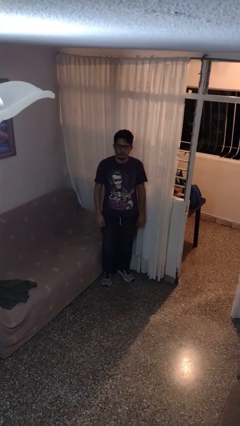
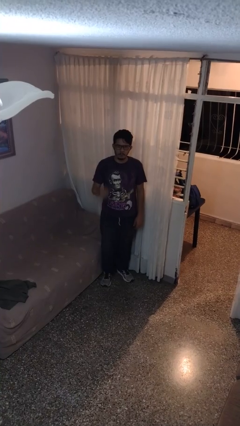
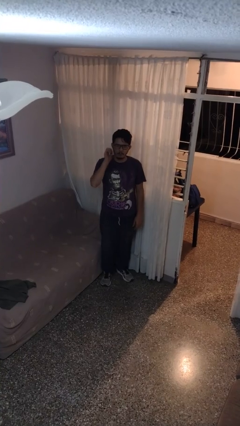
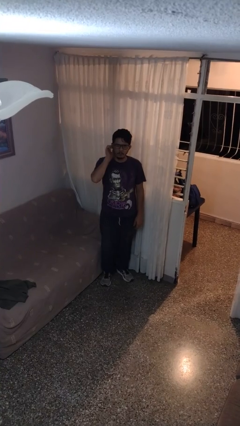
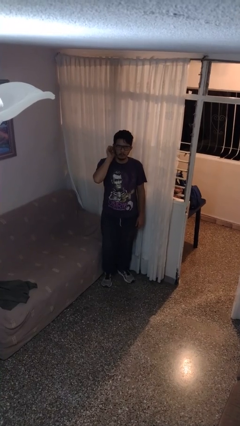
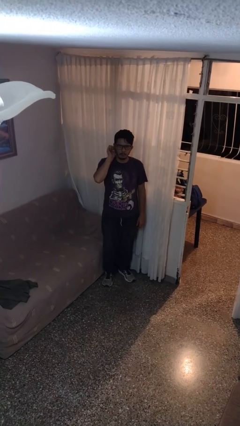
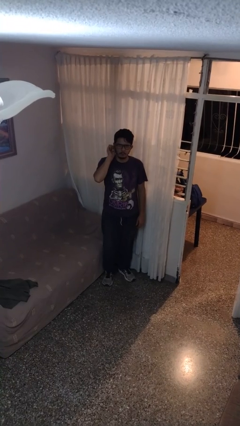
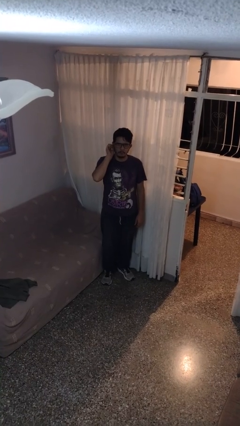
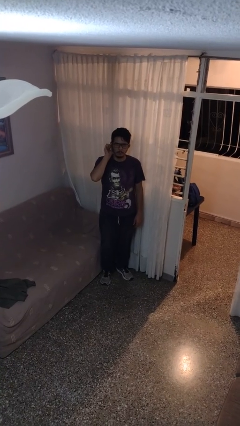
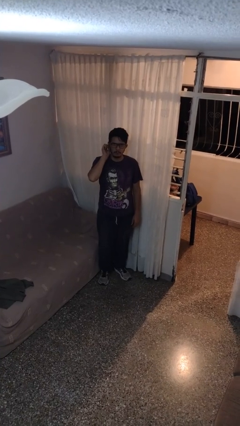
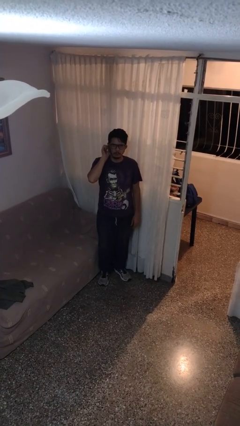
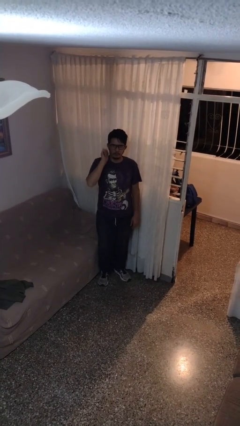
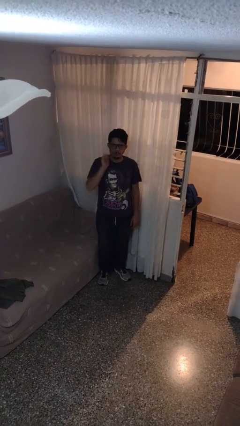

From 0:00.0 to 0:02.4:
person touches earlobe

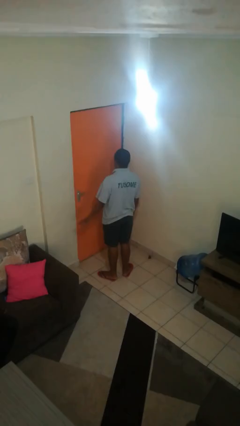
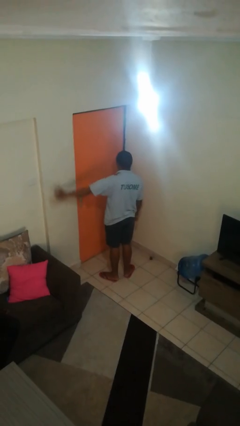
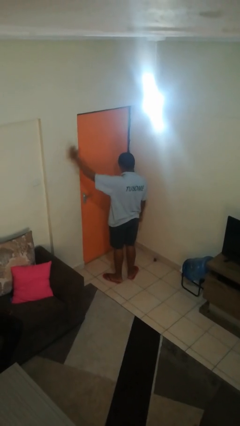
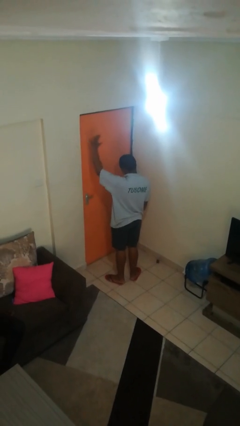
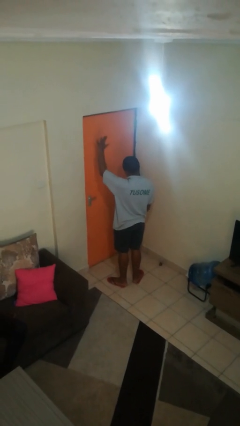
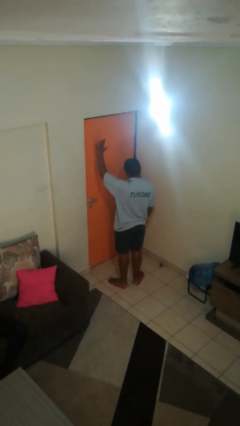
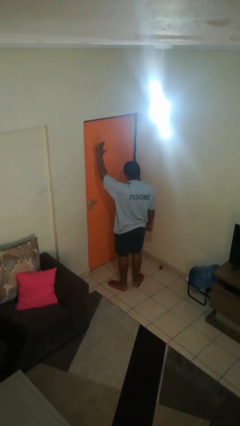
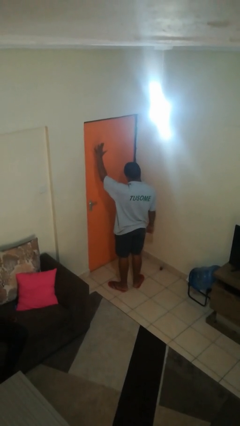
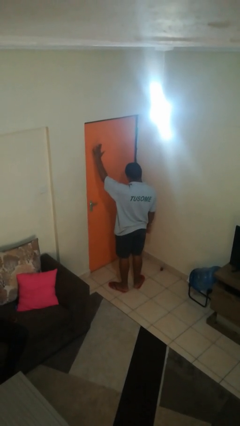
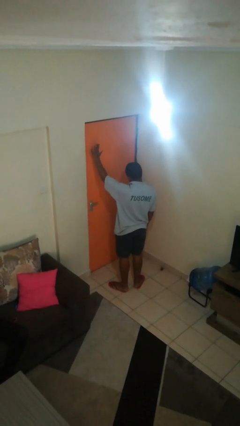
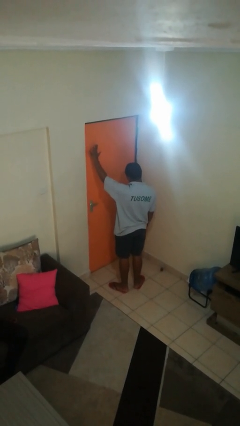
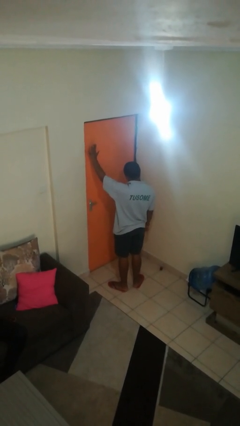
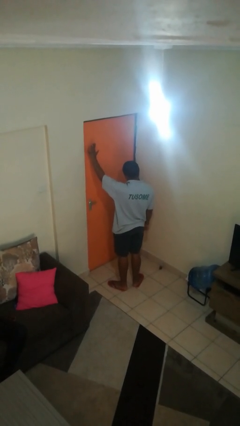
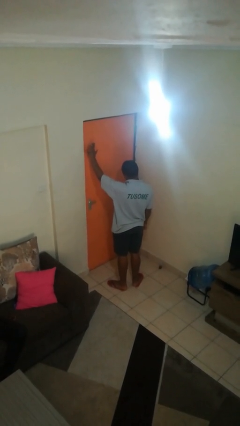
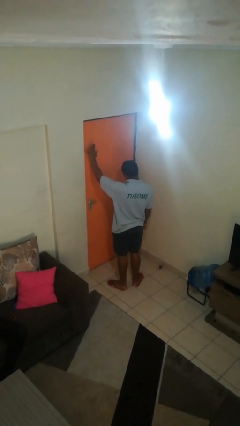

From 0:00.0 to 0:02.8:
person gestures number five

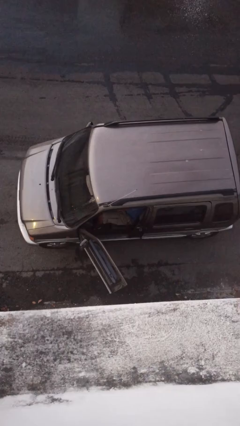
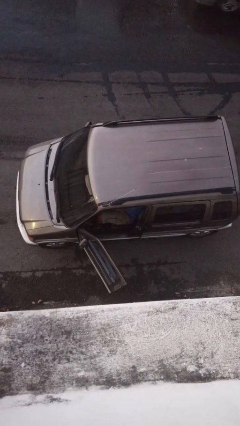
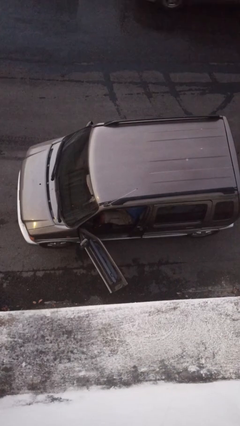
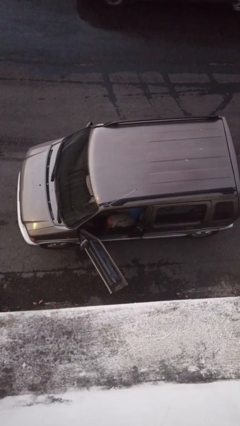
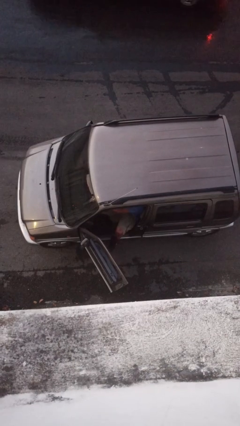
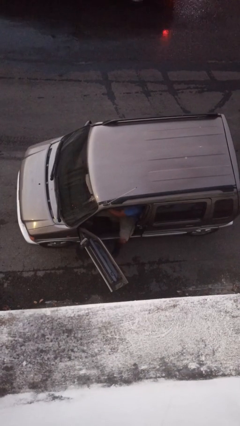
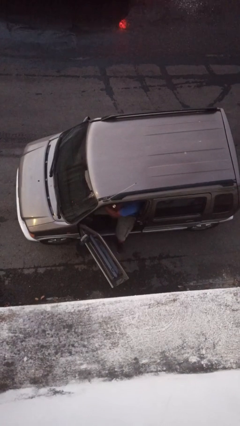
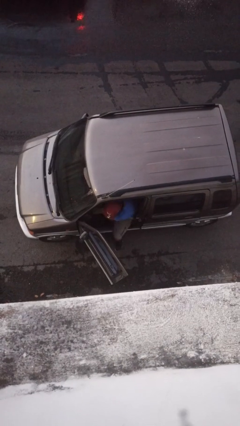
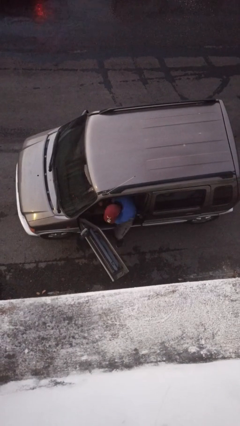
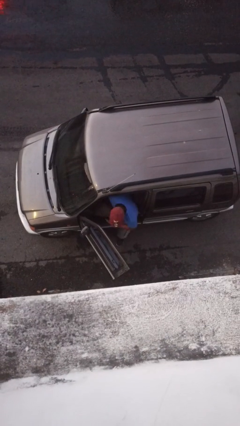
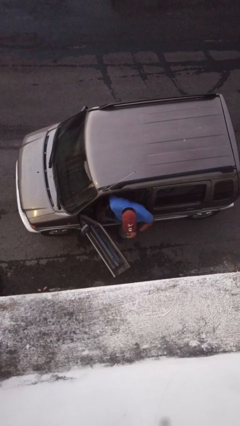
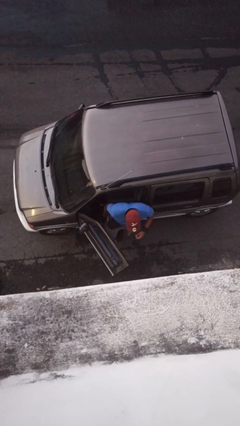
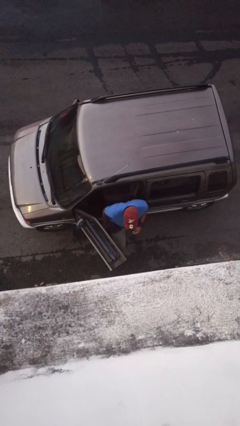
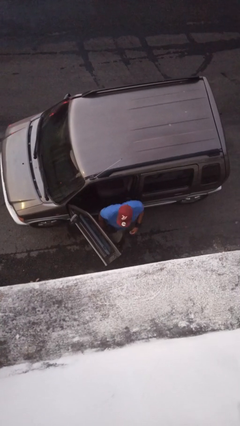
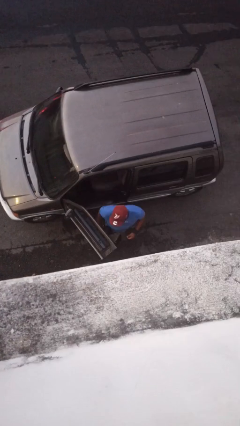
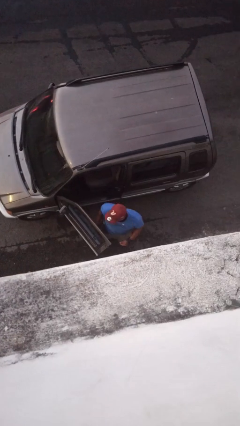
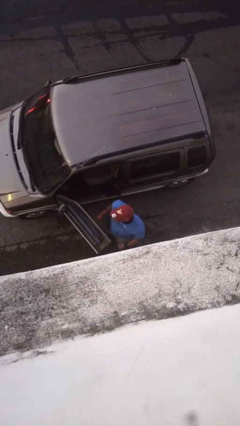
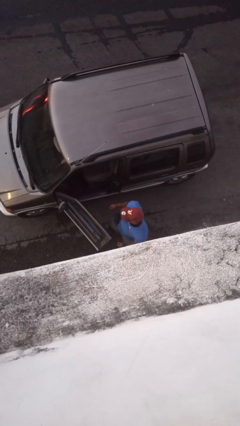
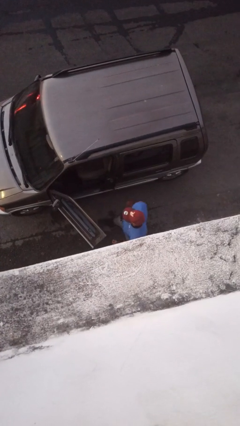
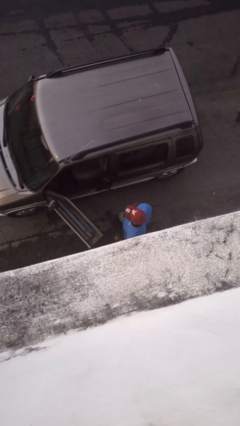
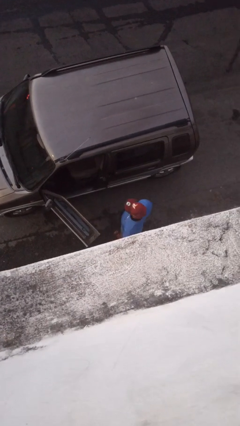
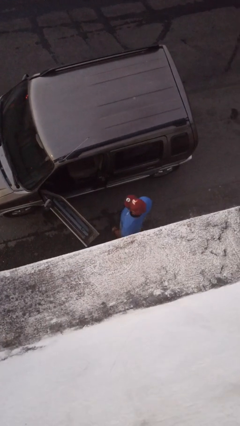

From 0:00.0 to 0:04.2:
person exits car

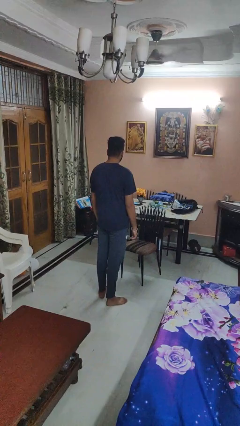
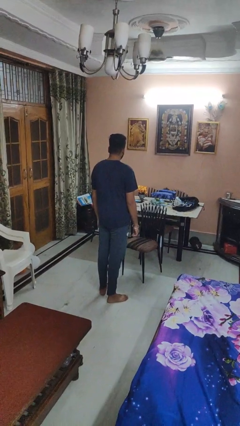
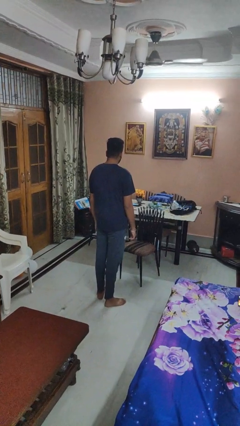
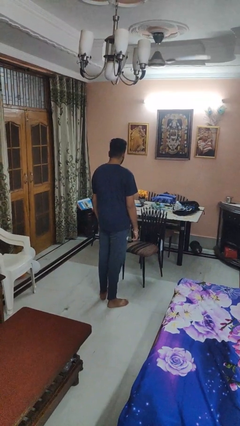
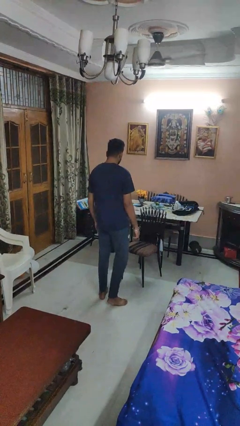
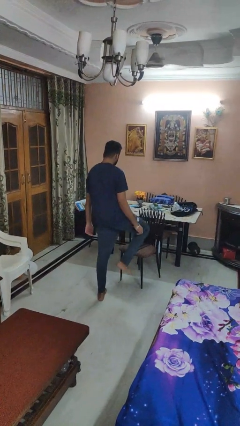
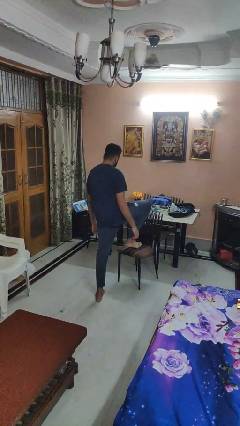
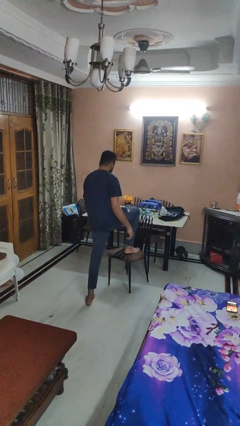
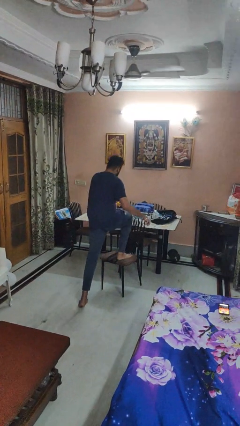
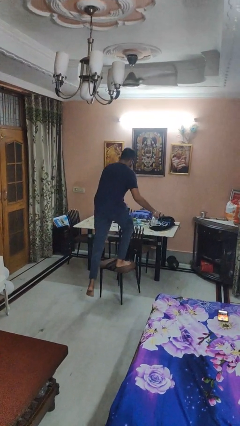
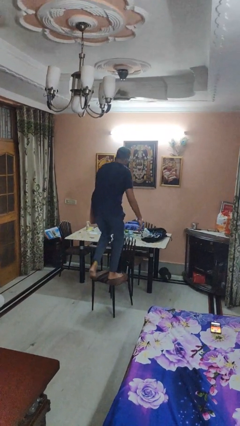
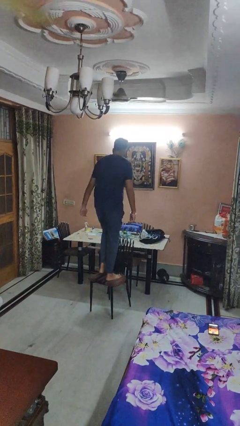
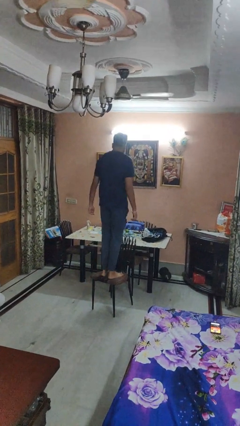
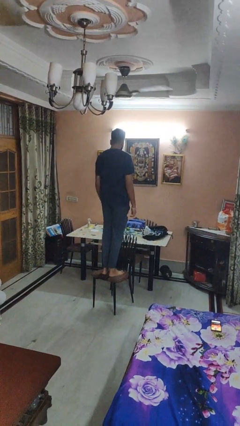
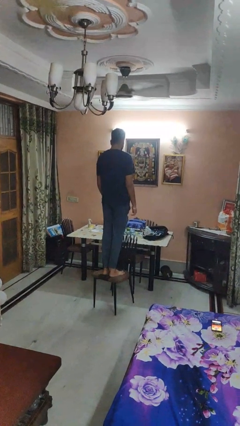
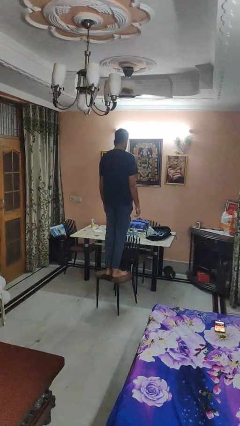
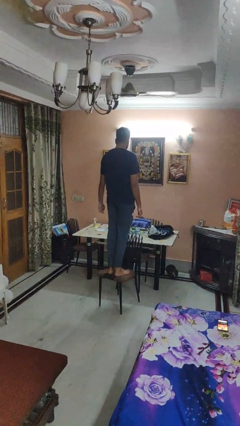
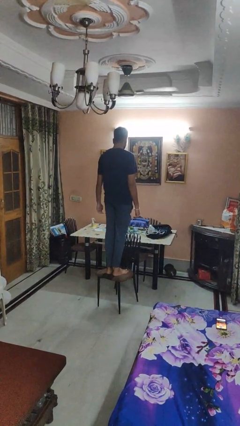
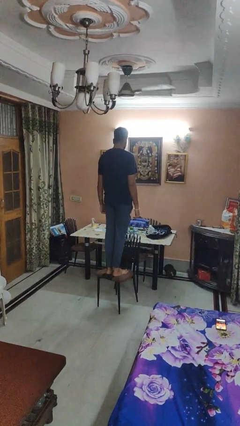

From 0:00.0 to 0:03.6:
person climbs on chair

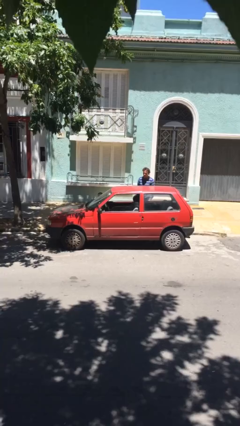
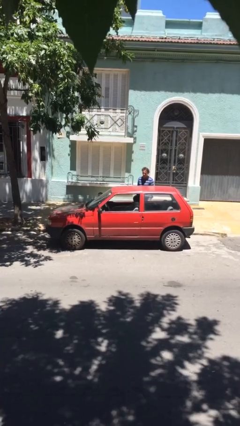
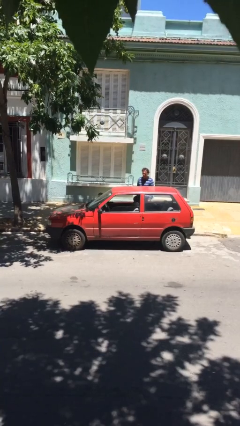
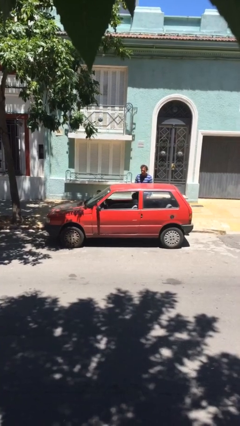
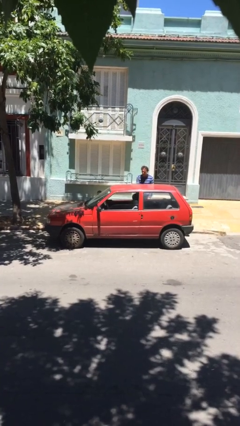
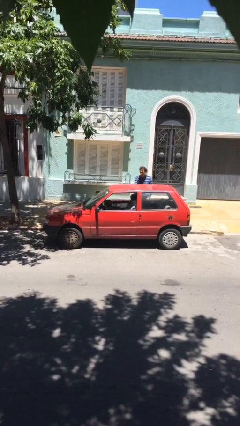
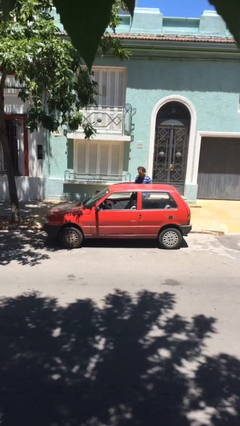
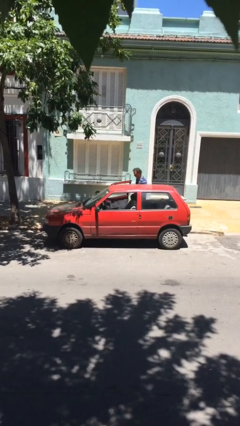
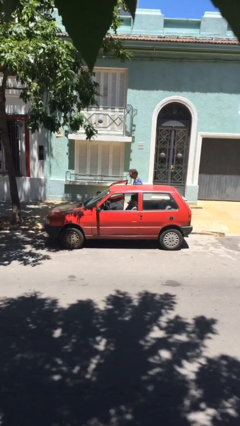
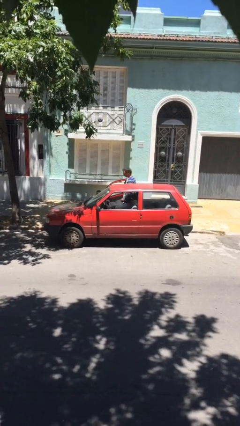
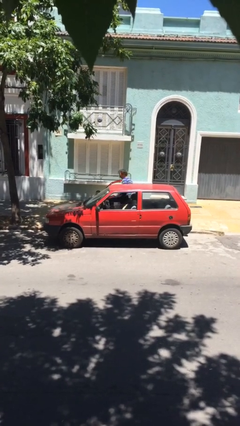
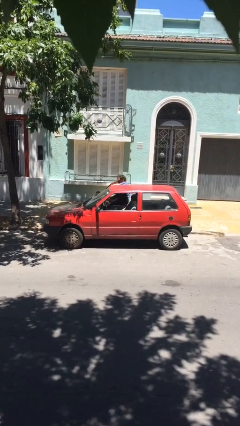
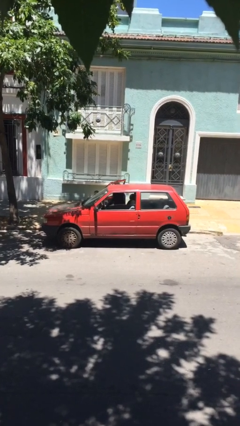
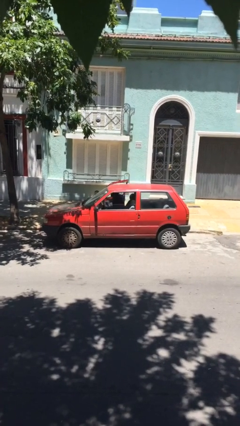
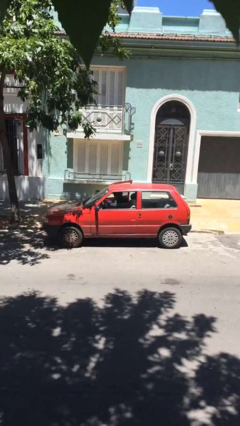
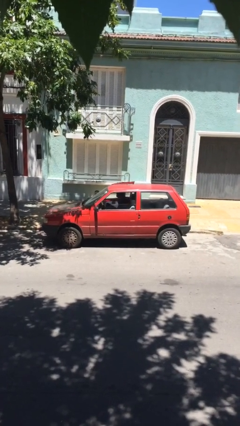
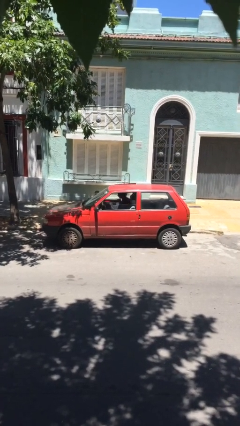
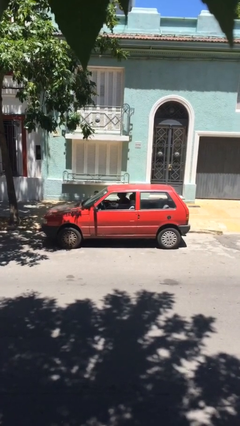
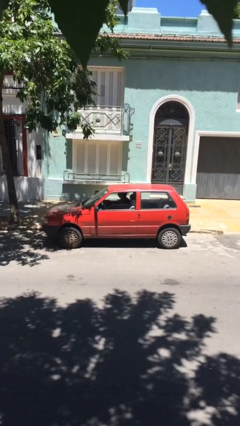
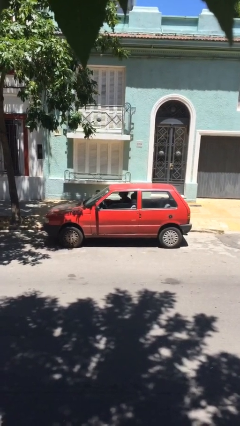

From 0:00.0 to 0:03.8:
car picks up person

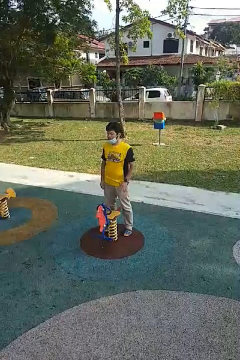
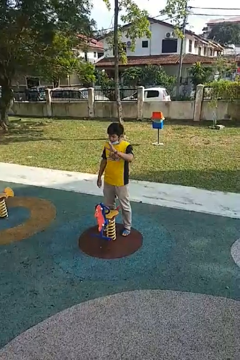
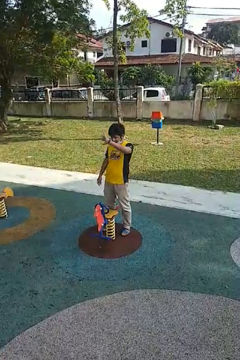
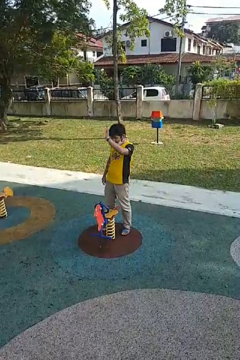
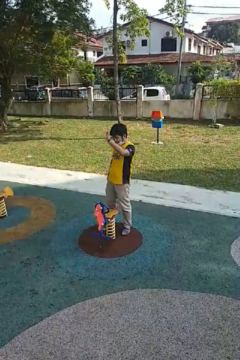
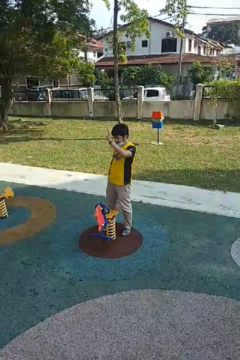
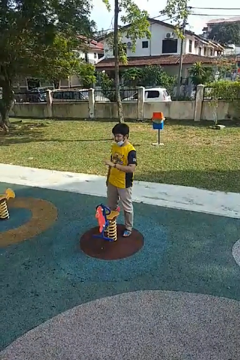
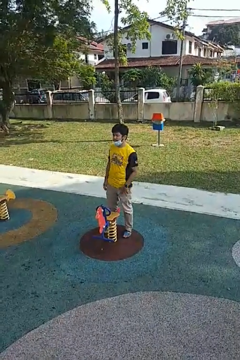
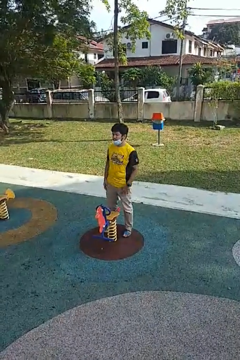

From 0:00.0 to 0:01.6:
person waves at person
